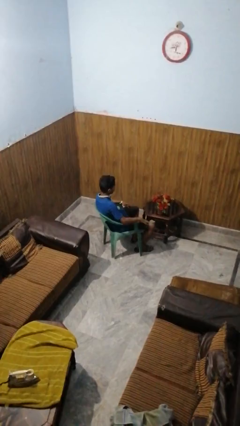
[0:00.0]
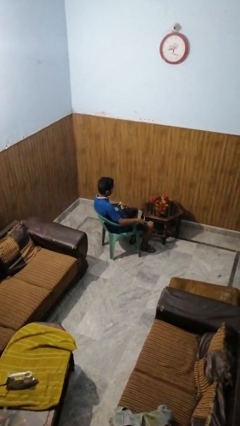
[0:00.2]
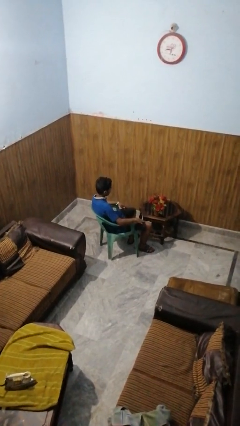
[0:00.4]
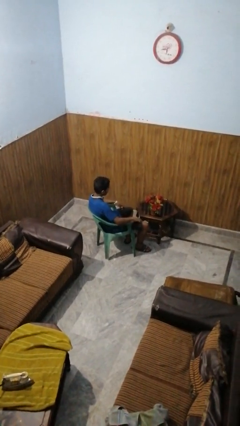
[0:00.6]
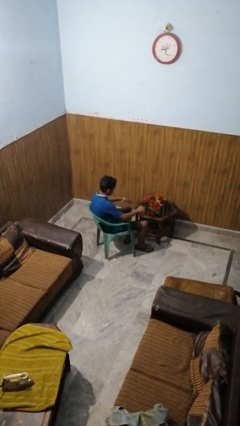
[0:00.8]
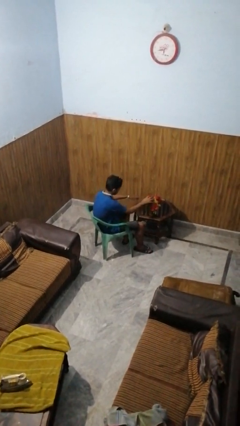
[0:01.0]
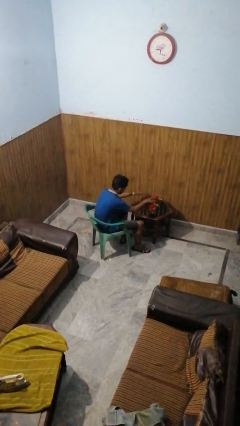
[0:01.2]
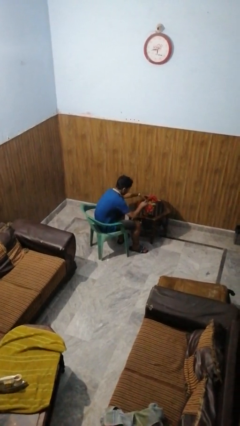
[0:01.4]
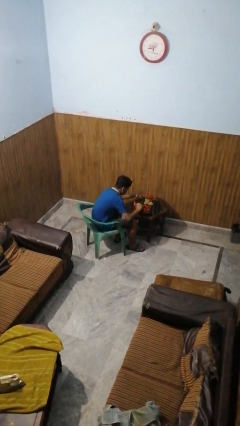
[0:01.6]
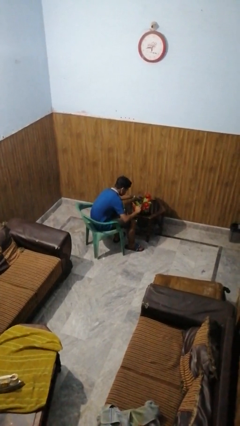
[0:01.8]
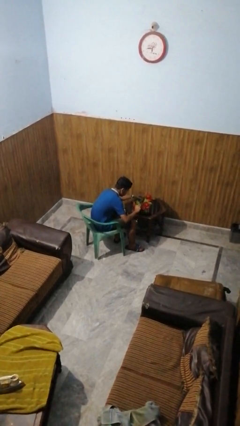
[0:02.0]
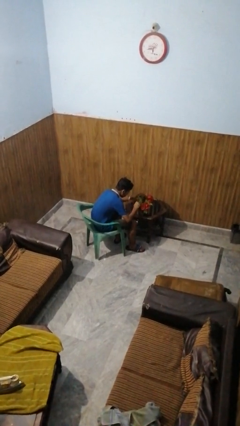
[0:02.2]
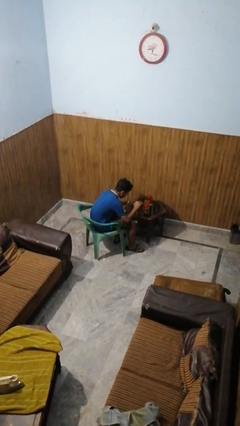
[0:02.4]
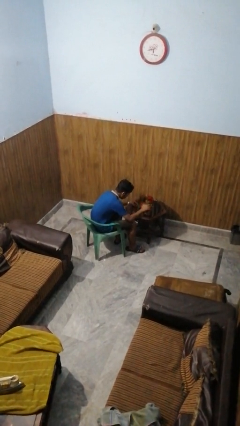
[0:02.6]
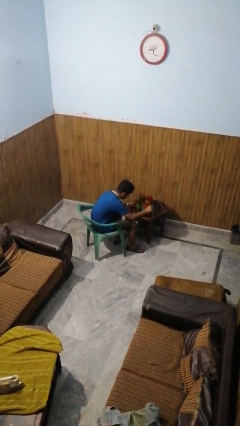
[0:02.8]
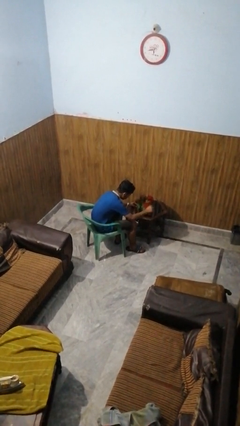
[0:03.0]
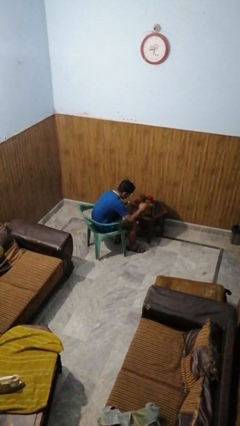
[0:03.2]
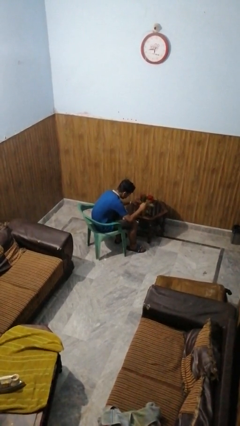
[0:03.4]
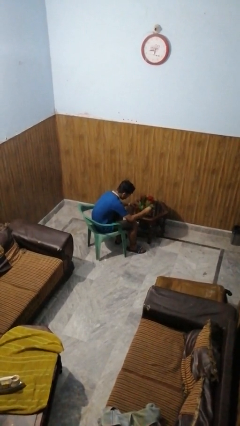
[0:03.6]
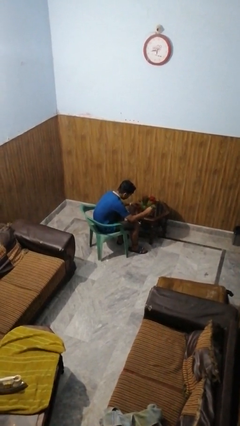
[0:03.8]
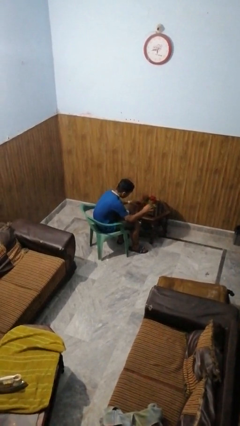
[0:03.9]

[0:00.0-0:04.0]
person arranges flowers in vase

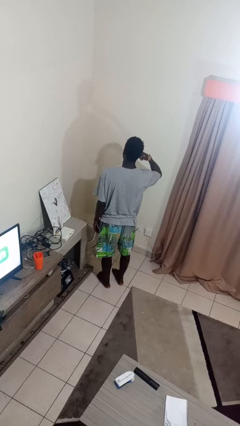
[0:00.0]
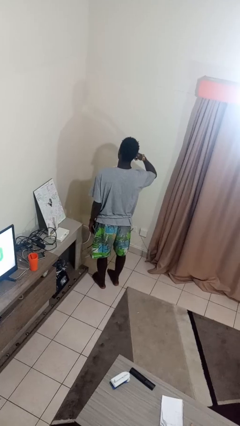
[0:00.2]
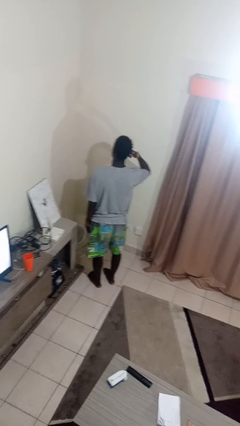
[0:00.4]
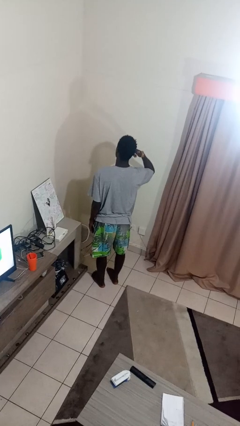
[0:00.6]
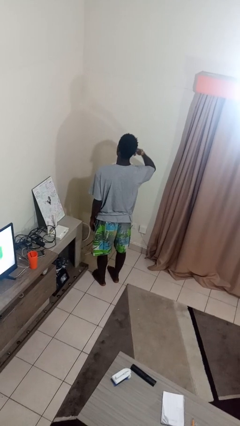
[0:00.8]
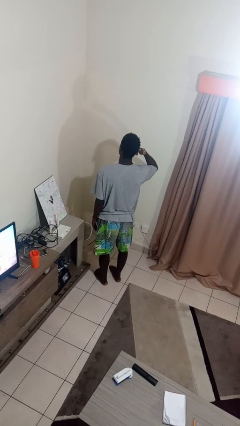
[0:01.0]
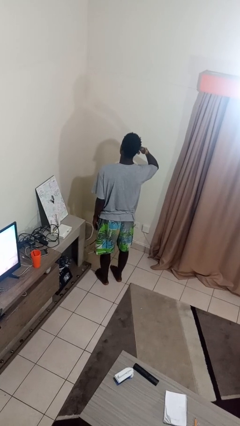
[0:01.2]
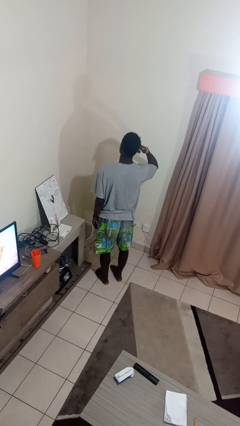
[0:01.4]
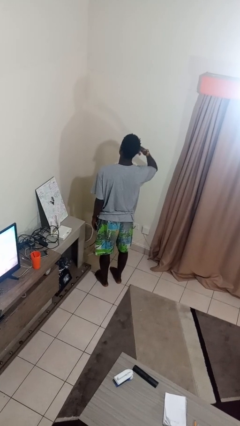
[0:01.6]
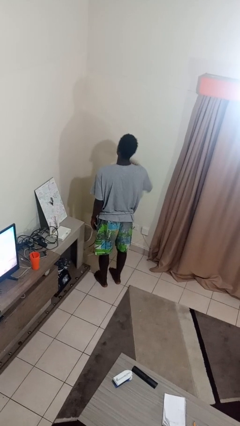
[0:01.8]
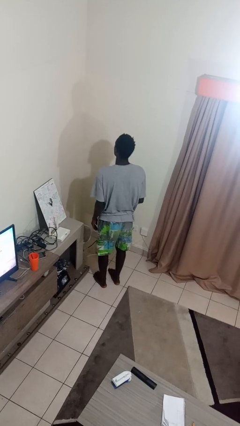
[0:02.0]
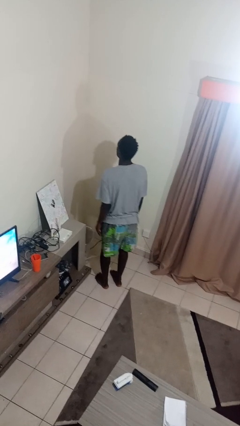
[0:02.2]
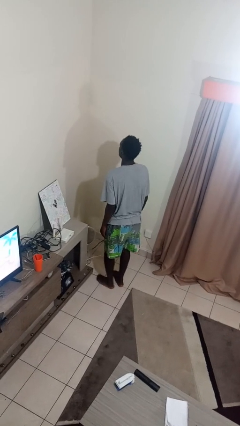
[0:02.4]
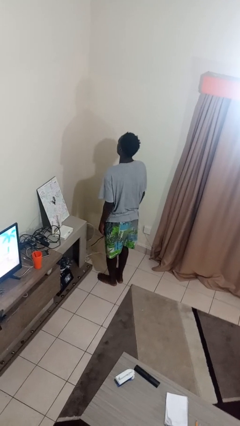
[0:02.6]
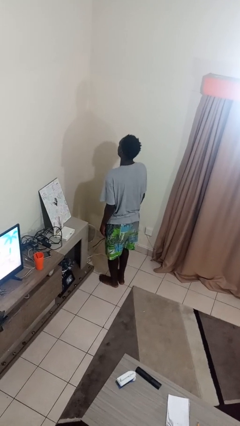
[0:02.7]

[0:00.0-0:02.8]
person gestures call me

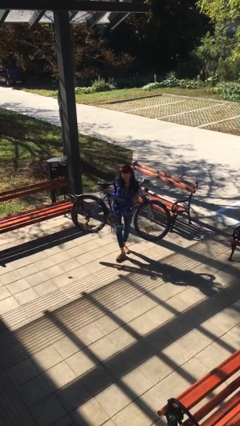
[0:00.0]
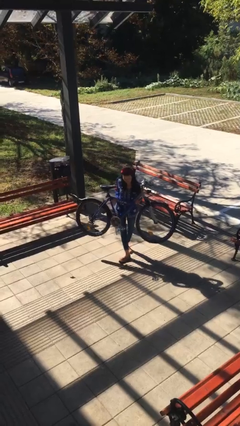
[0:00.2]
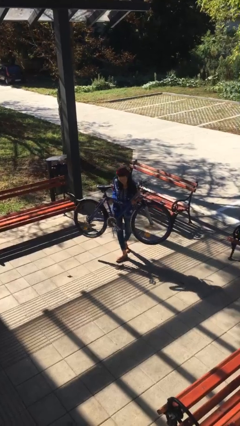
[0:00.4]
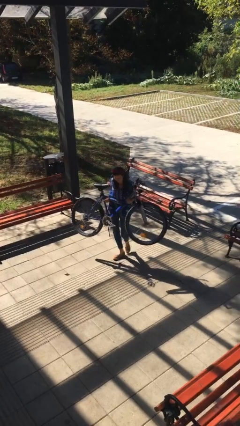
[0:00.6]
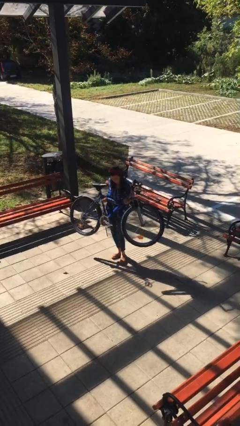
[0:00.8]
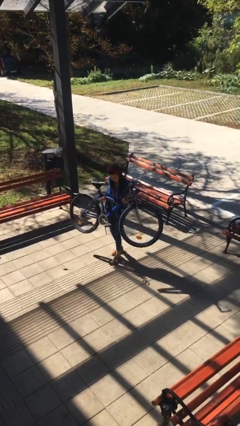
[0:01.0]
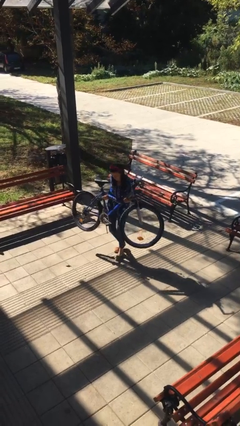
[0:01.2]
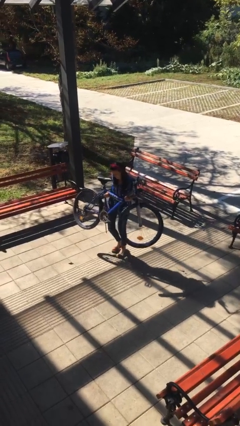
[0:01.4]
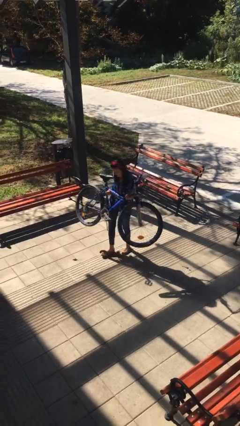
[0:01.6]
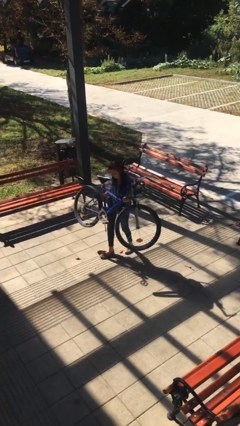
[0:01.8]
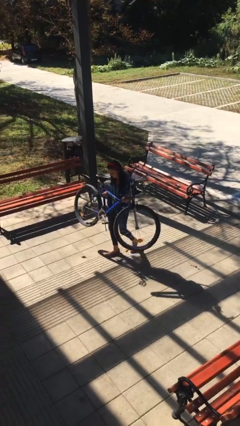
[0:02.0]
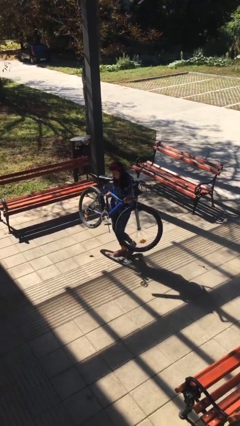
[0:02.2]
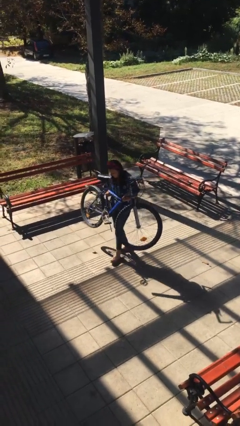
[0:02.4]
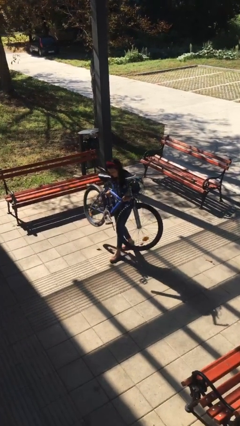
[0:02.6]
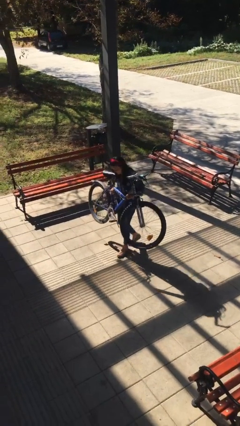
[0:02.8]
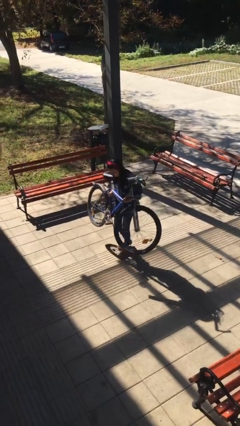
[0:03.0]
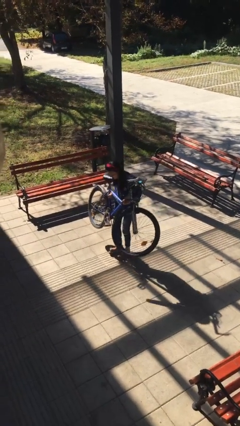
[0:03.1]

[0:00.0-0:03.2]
person carries heavy object

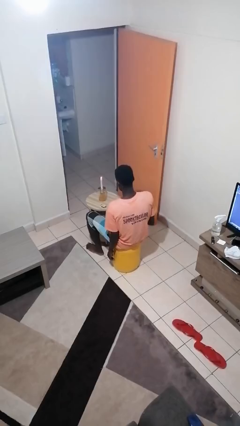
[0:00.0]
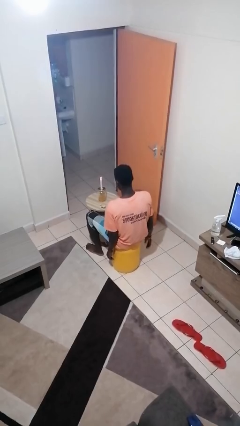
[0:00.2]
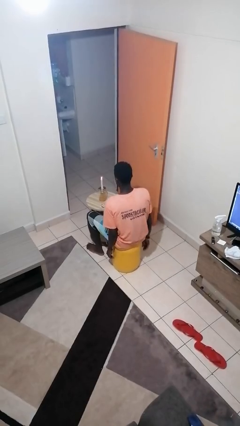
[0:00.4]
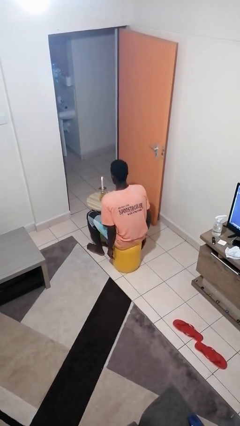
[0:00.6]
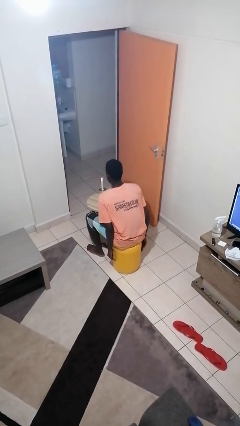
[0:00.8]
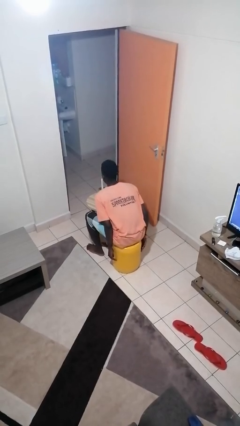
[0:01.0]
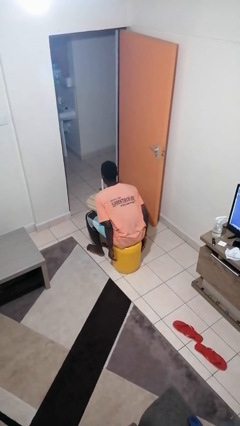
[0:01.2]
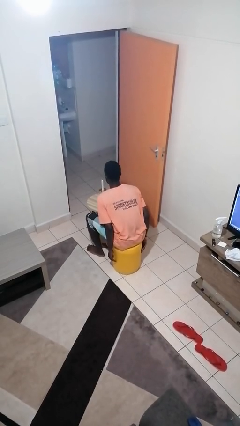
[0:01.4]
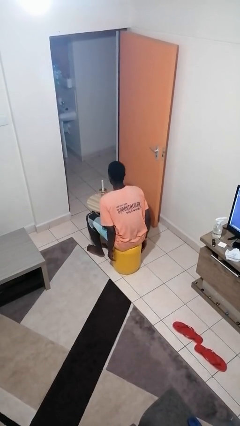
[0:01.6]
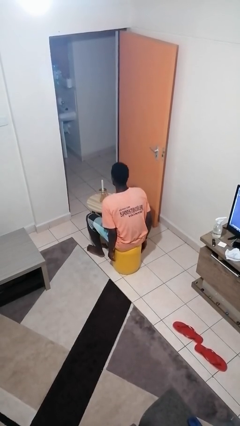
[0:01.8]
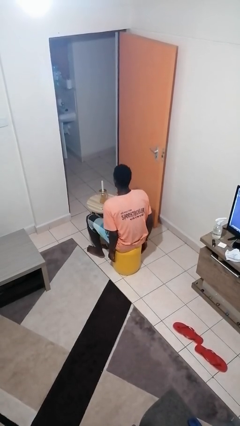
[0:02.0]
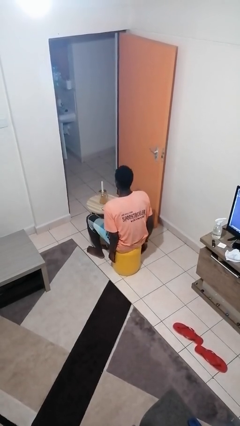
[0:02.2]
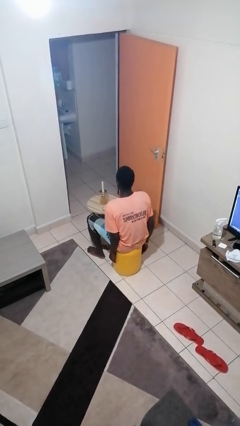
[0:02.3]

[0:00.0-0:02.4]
person extinguishes candle

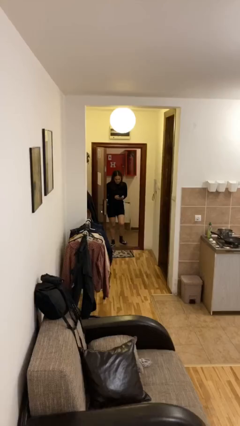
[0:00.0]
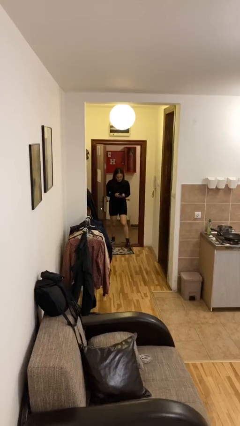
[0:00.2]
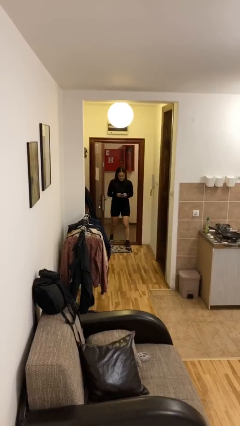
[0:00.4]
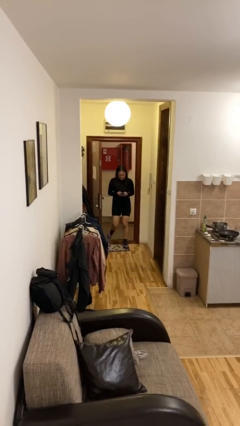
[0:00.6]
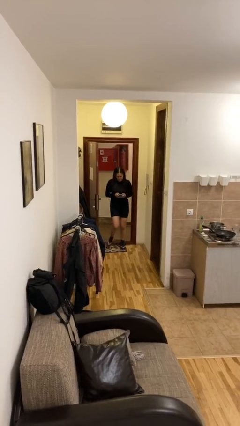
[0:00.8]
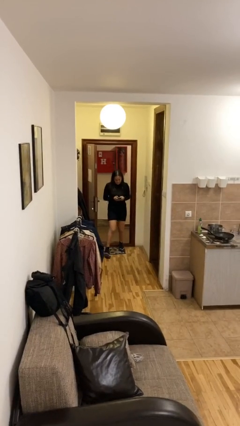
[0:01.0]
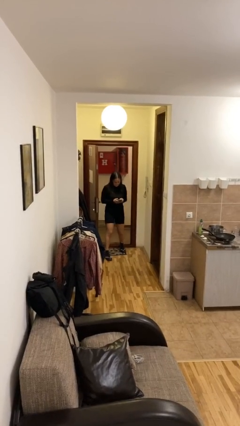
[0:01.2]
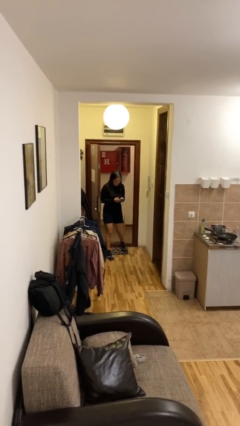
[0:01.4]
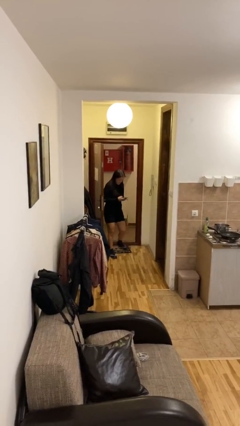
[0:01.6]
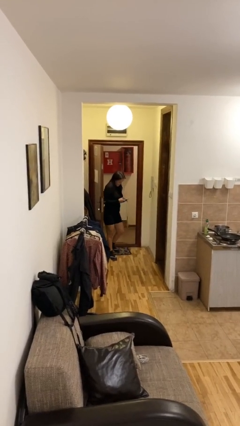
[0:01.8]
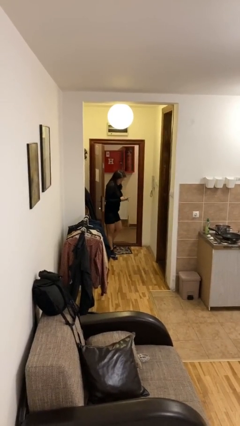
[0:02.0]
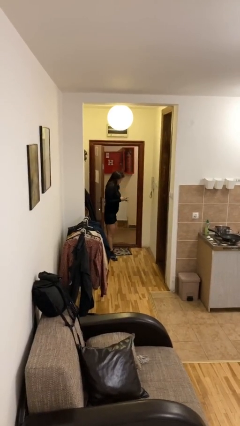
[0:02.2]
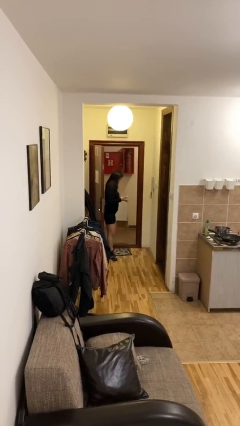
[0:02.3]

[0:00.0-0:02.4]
person enters scene through structure

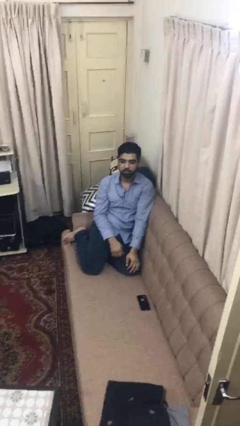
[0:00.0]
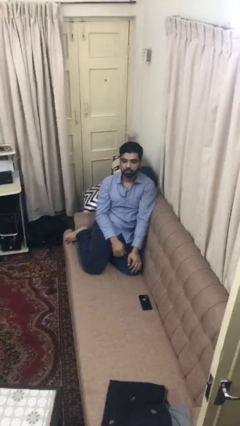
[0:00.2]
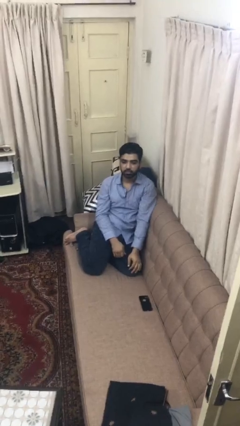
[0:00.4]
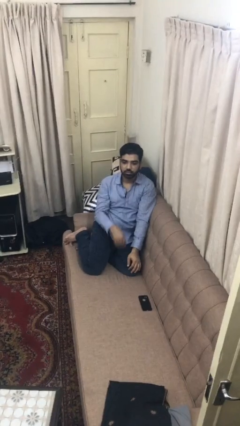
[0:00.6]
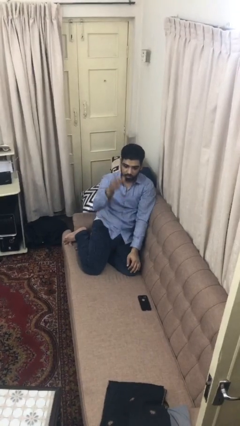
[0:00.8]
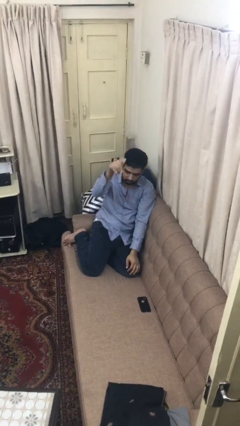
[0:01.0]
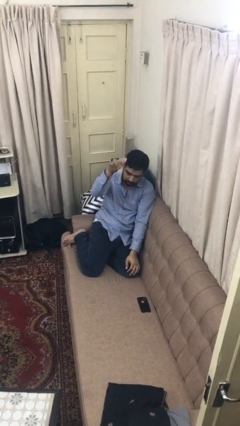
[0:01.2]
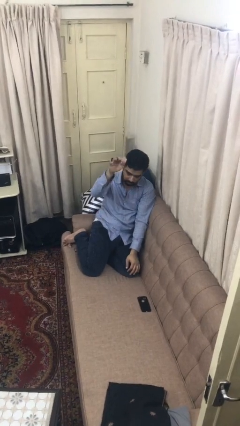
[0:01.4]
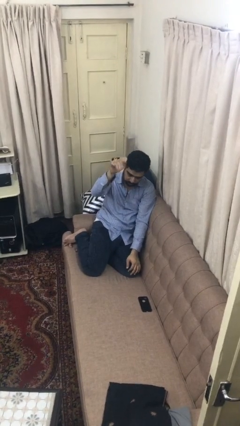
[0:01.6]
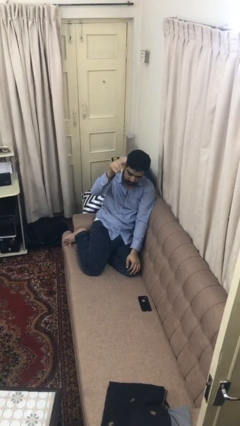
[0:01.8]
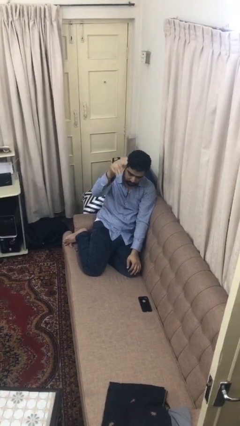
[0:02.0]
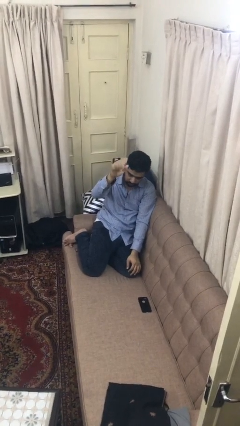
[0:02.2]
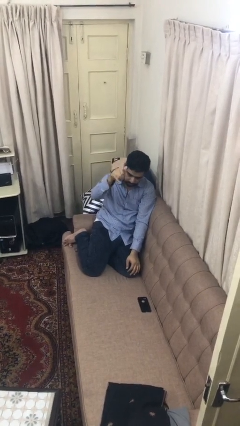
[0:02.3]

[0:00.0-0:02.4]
person gestures come here

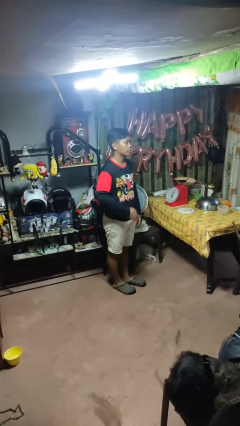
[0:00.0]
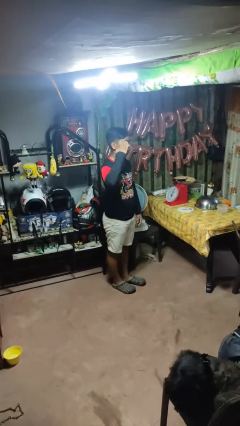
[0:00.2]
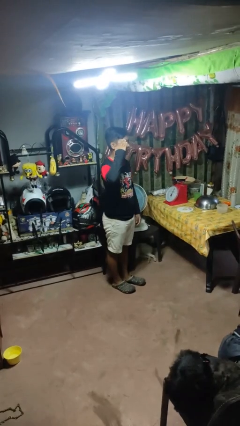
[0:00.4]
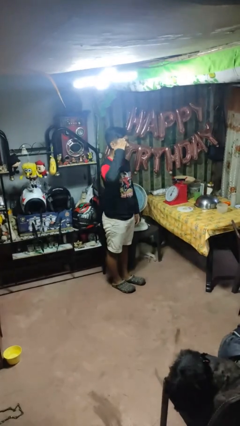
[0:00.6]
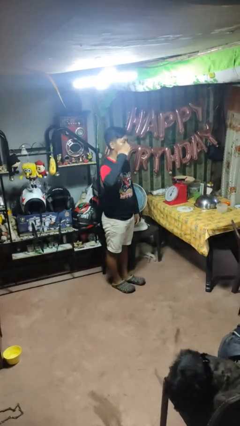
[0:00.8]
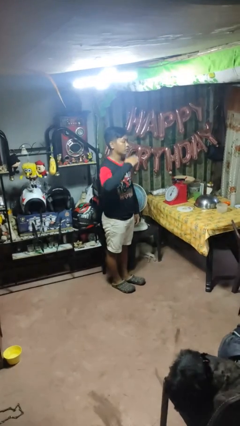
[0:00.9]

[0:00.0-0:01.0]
person salutes
